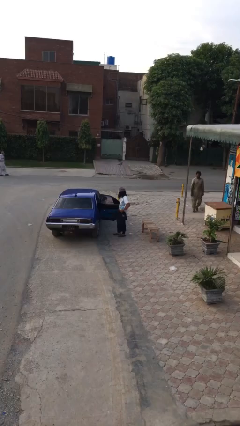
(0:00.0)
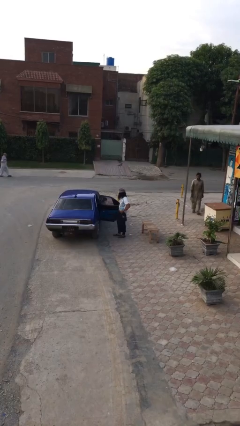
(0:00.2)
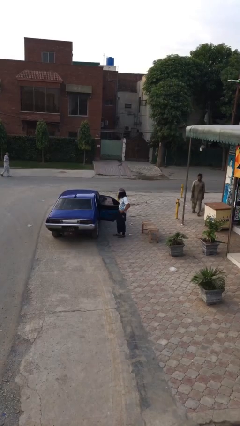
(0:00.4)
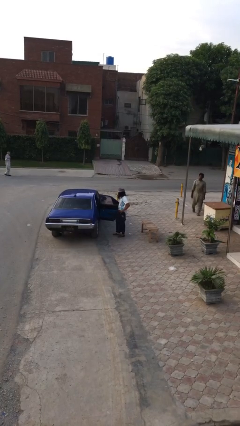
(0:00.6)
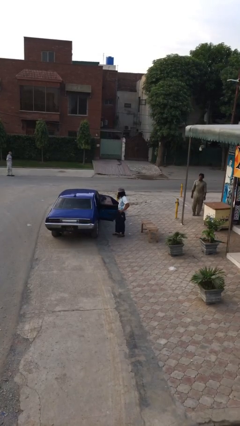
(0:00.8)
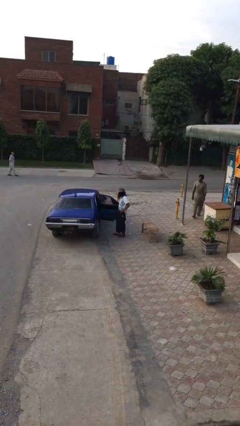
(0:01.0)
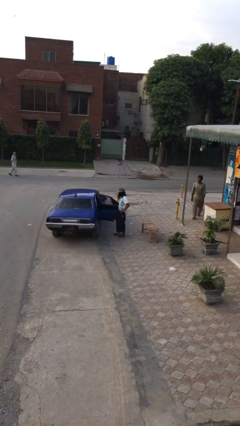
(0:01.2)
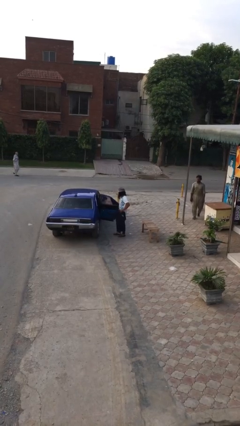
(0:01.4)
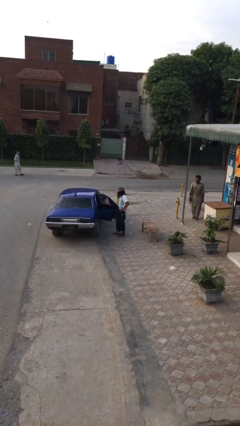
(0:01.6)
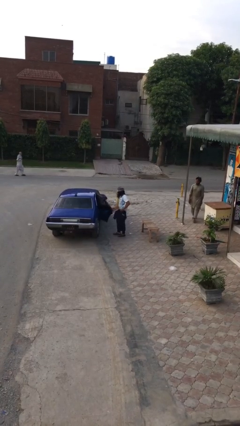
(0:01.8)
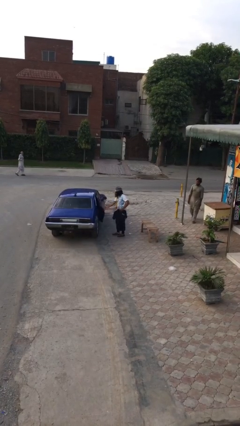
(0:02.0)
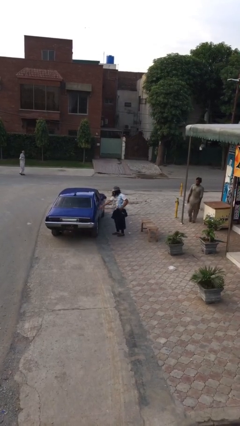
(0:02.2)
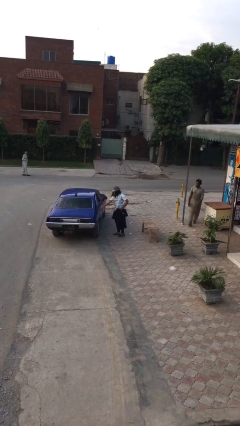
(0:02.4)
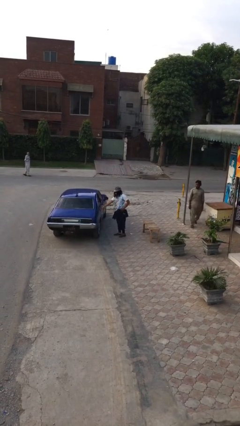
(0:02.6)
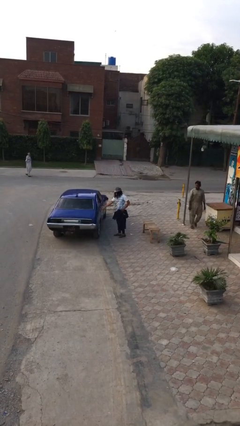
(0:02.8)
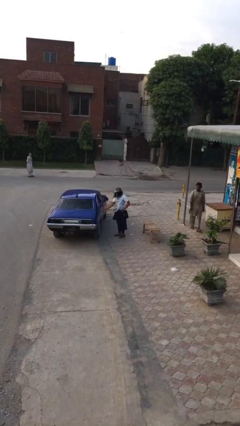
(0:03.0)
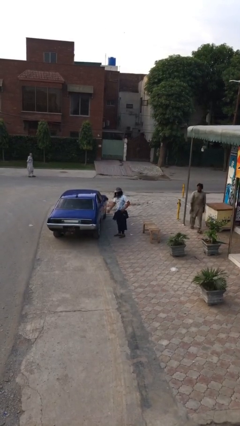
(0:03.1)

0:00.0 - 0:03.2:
person closes car door

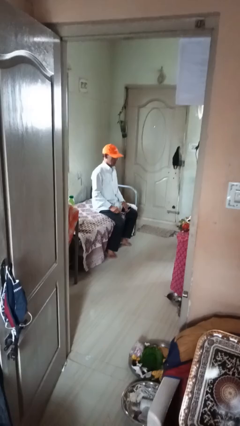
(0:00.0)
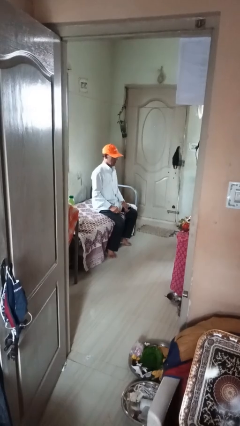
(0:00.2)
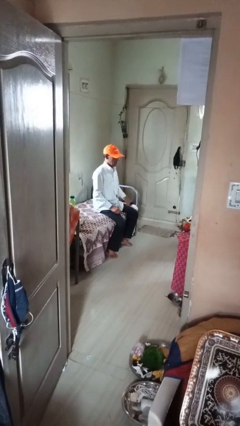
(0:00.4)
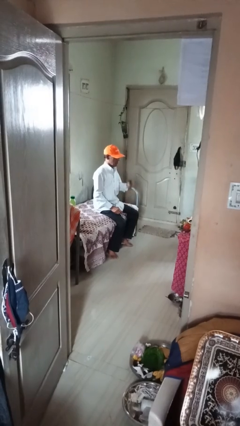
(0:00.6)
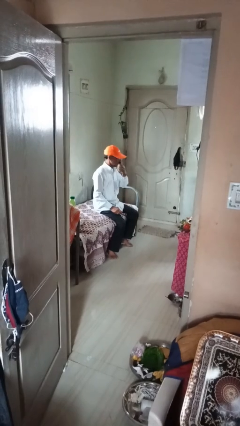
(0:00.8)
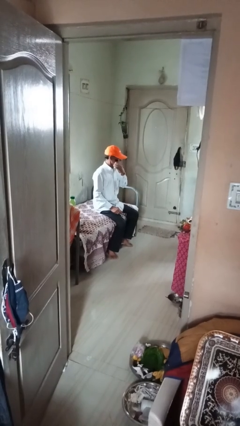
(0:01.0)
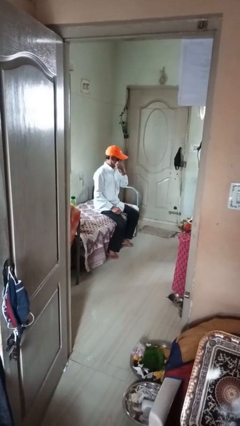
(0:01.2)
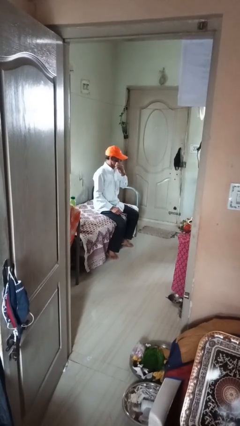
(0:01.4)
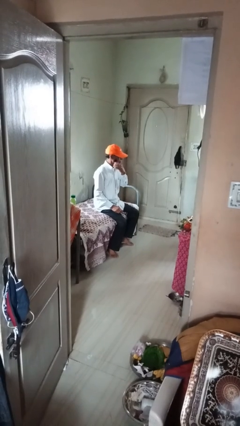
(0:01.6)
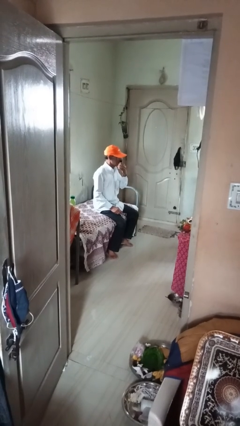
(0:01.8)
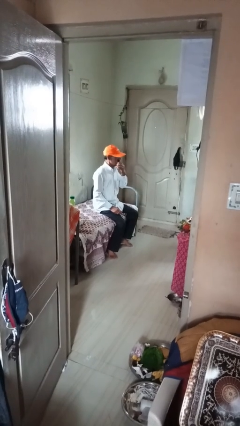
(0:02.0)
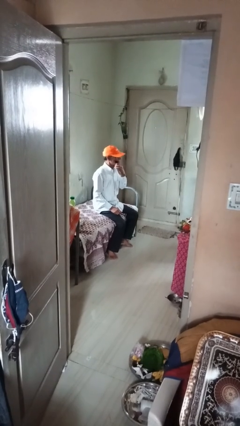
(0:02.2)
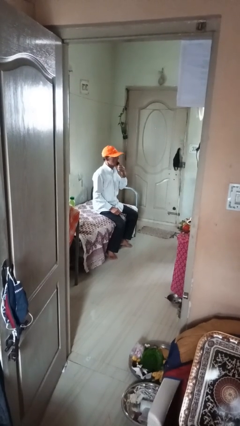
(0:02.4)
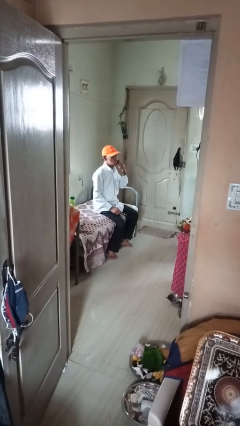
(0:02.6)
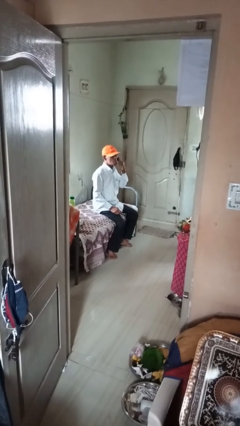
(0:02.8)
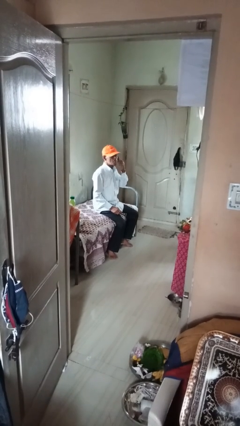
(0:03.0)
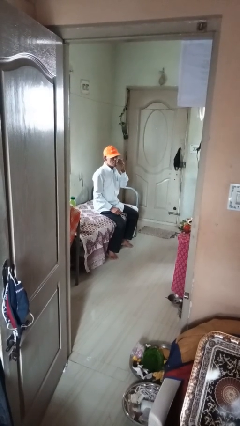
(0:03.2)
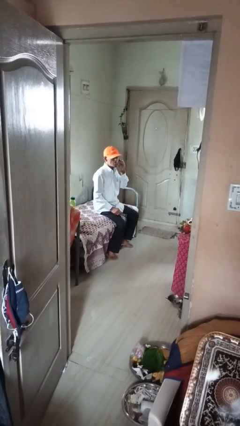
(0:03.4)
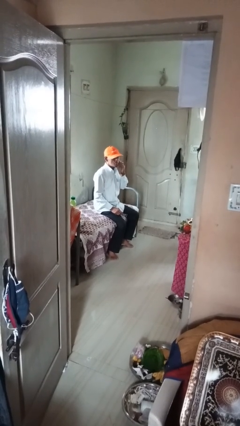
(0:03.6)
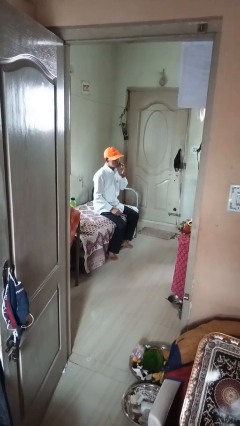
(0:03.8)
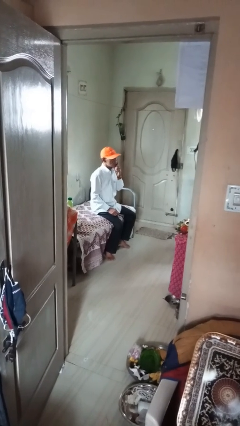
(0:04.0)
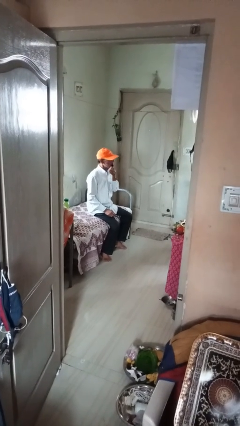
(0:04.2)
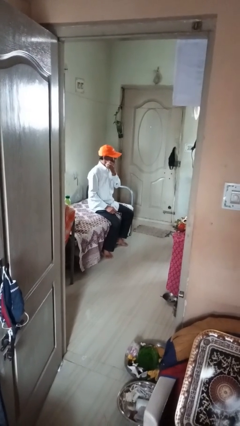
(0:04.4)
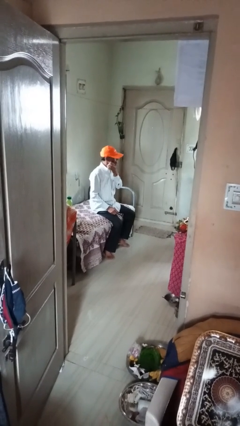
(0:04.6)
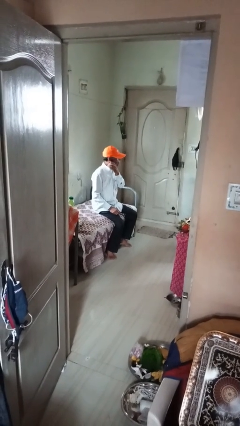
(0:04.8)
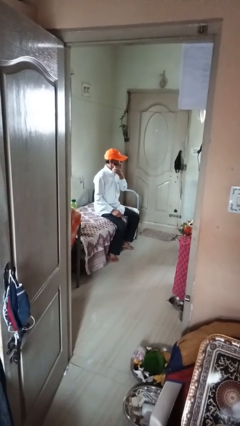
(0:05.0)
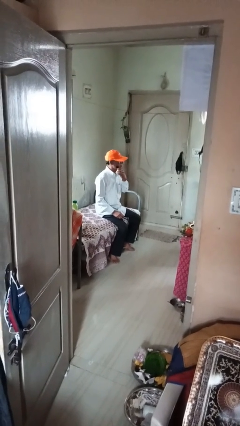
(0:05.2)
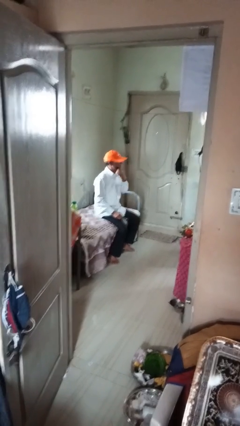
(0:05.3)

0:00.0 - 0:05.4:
person applies shaving cream

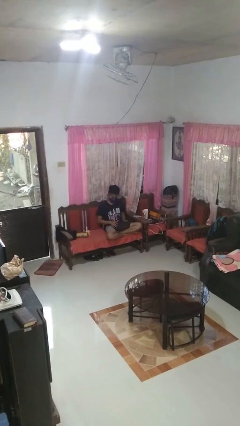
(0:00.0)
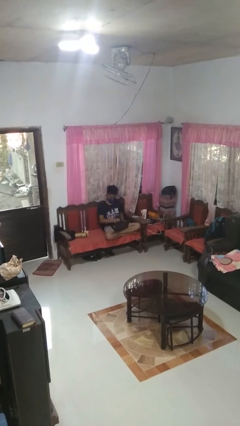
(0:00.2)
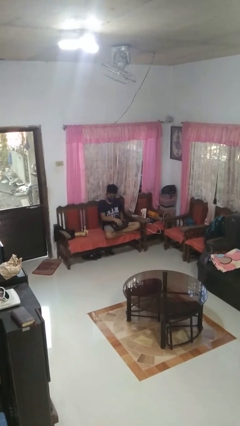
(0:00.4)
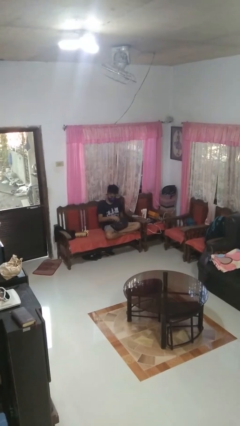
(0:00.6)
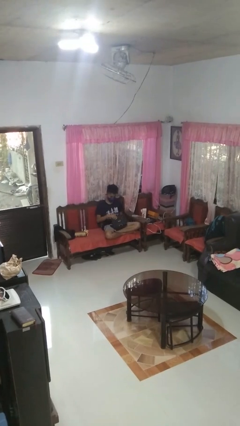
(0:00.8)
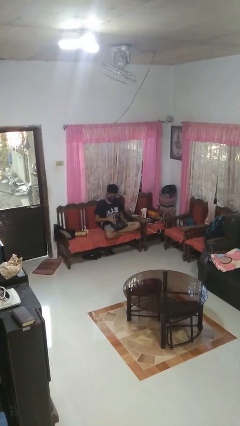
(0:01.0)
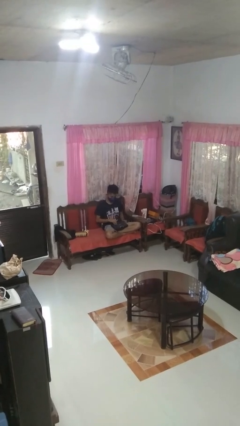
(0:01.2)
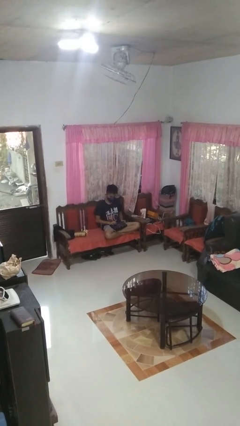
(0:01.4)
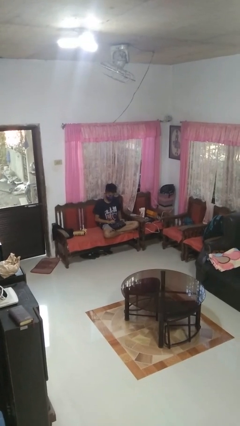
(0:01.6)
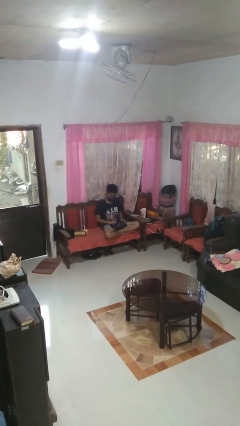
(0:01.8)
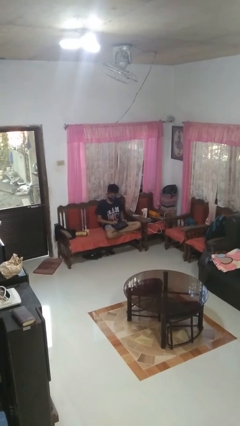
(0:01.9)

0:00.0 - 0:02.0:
person closes laptop

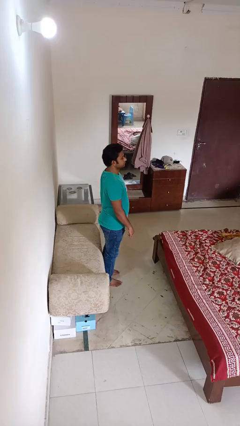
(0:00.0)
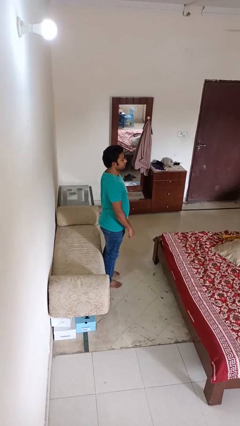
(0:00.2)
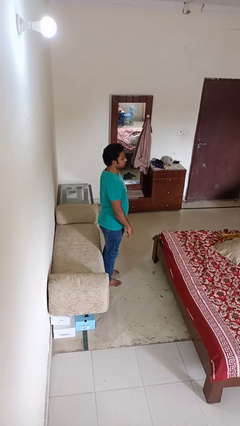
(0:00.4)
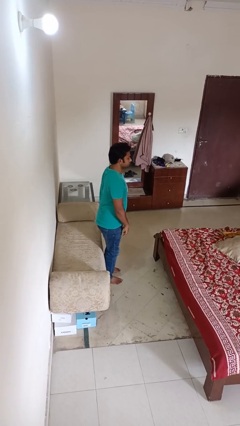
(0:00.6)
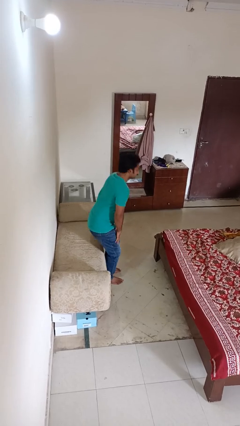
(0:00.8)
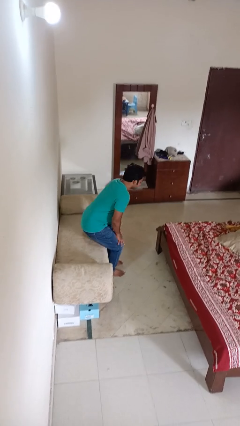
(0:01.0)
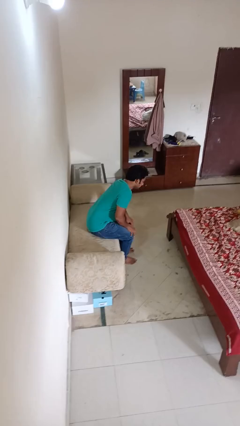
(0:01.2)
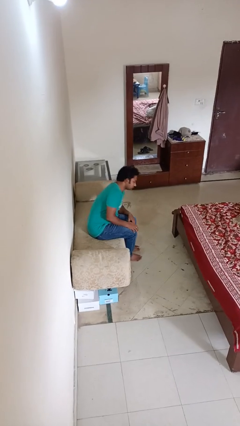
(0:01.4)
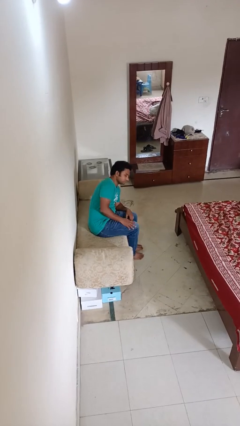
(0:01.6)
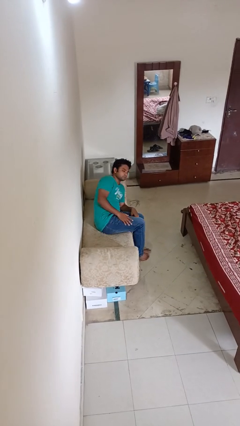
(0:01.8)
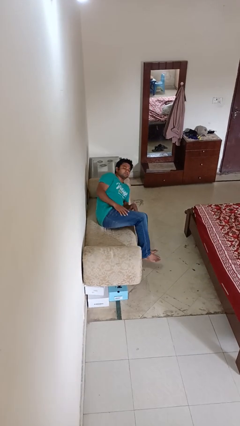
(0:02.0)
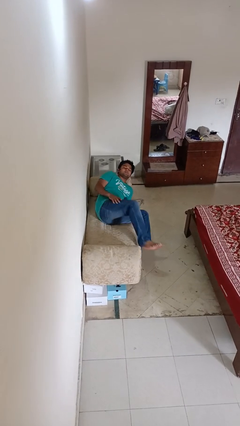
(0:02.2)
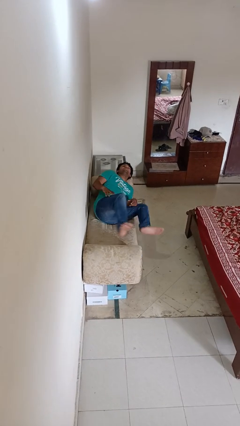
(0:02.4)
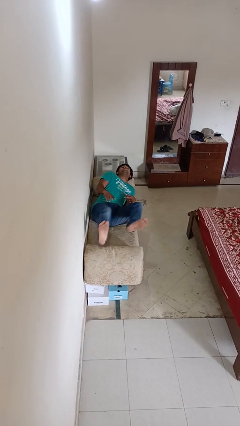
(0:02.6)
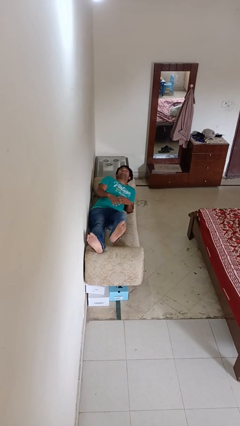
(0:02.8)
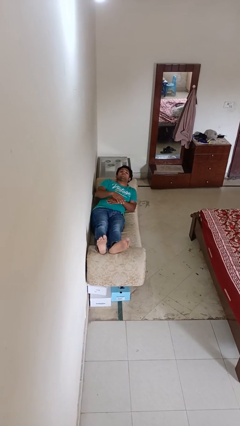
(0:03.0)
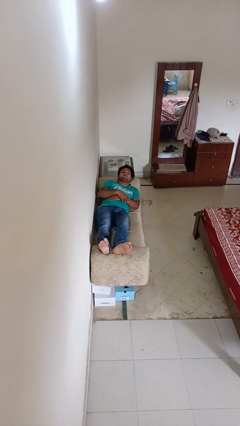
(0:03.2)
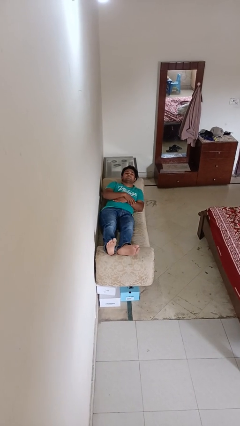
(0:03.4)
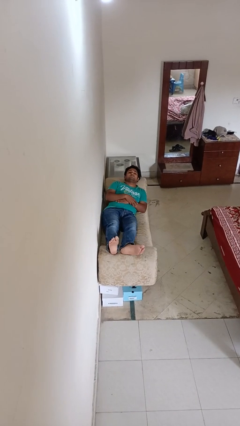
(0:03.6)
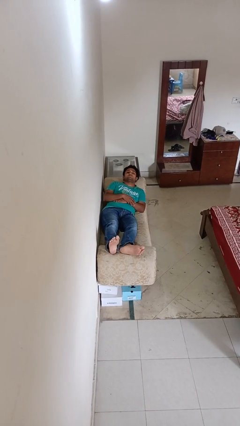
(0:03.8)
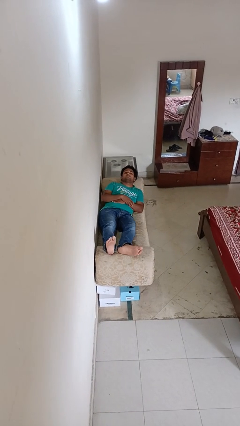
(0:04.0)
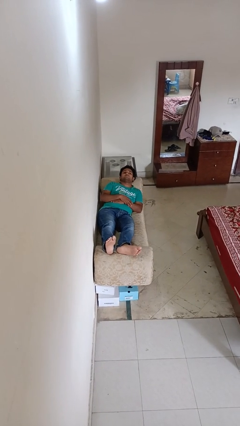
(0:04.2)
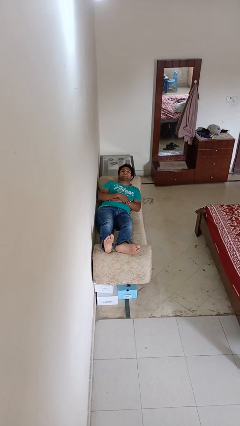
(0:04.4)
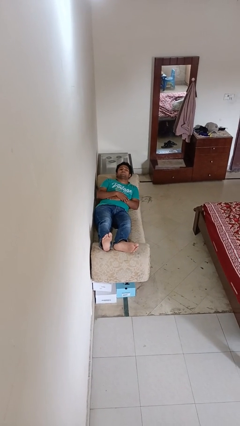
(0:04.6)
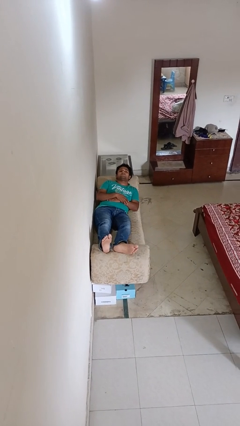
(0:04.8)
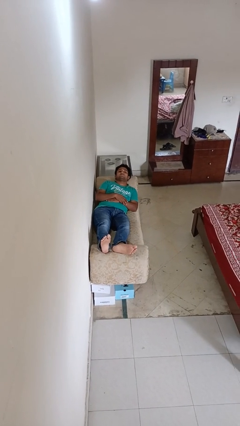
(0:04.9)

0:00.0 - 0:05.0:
person lies down on couch

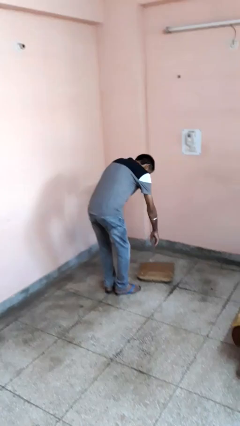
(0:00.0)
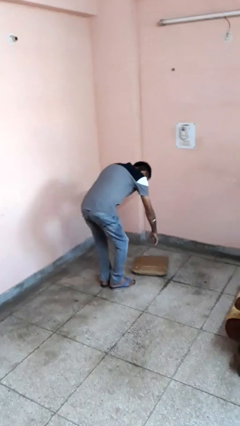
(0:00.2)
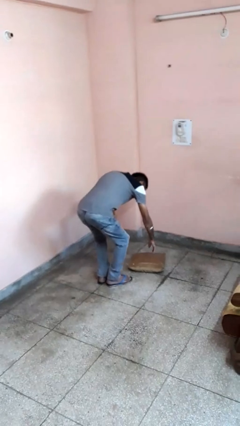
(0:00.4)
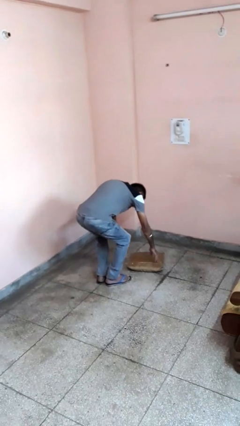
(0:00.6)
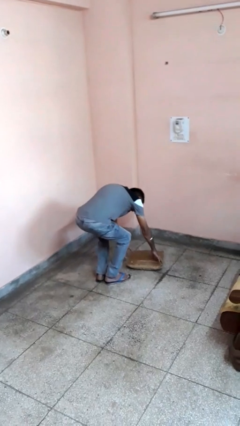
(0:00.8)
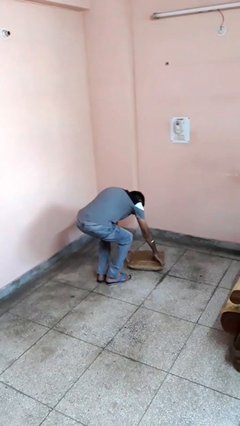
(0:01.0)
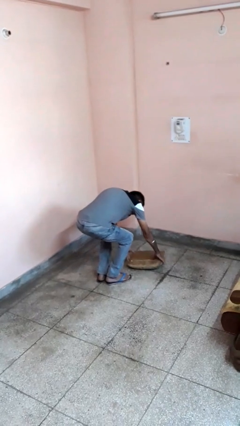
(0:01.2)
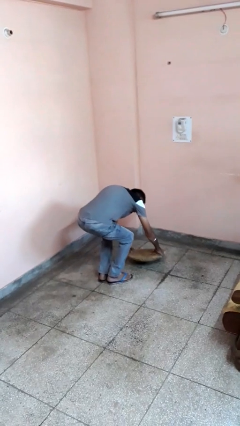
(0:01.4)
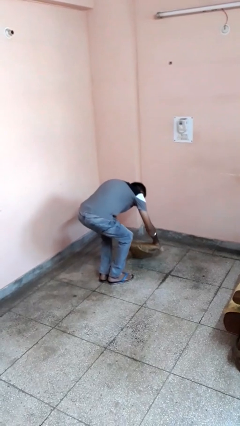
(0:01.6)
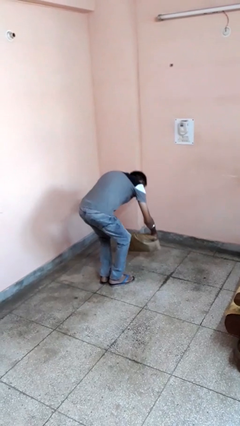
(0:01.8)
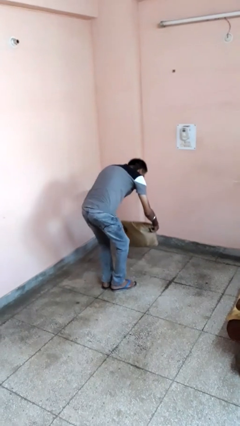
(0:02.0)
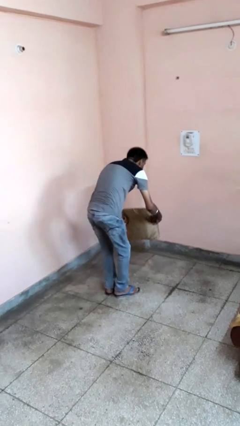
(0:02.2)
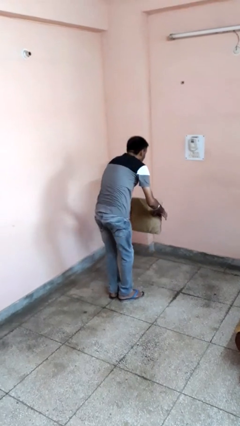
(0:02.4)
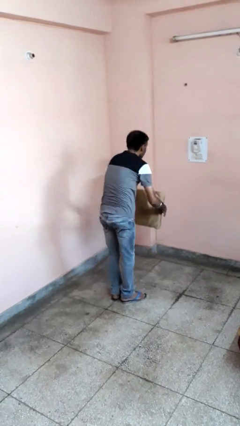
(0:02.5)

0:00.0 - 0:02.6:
person picks up object from floor
